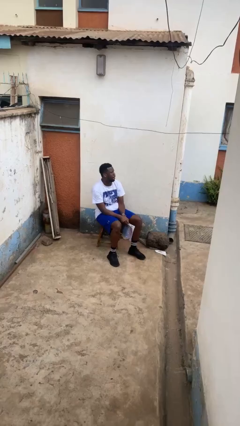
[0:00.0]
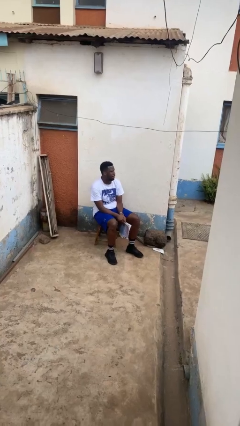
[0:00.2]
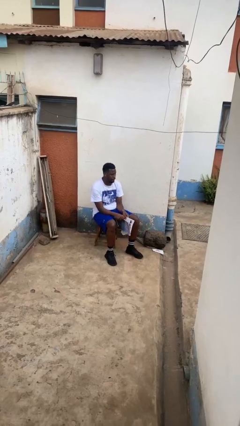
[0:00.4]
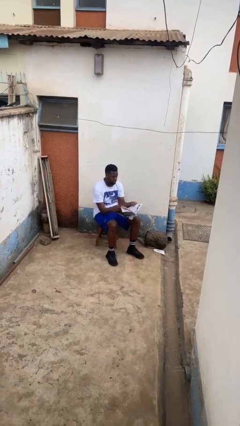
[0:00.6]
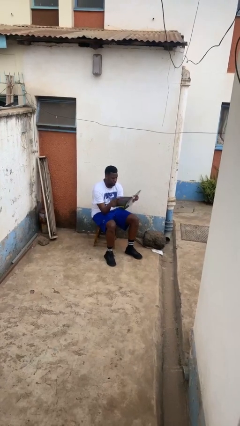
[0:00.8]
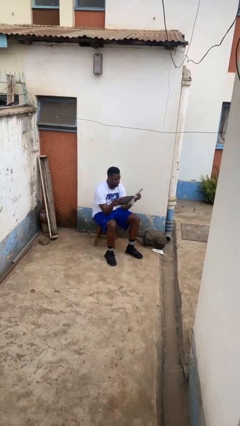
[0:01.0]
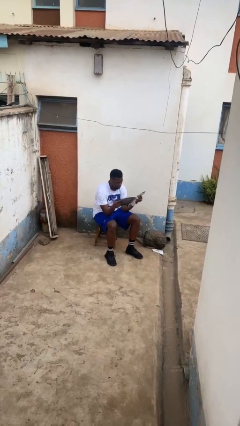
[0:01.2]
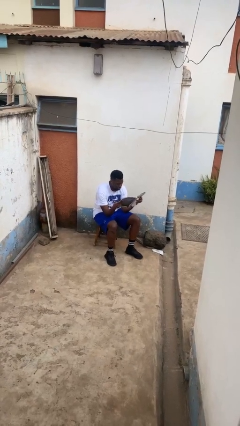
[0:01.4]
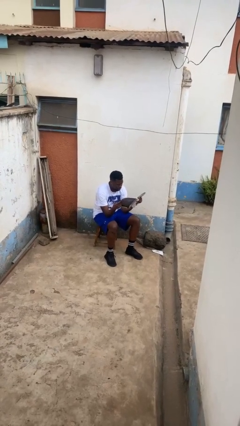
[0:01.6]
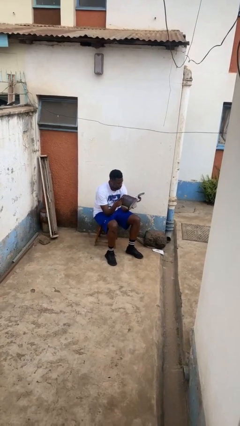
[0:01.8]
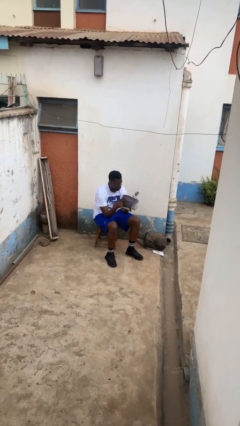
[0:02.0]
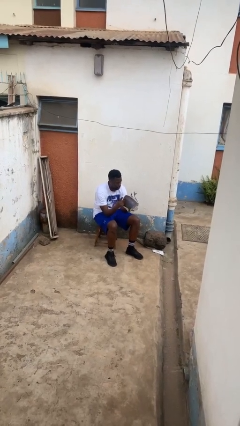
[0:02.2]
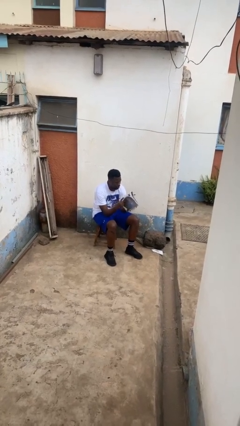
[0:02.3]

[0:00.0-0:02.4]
person reads magazine

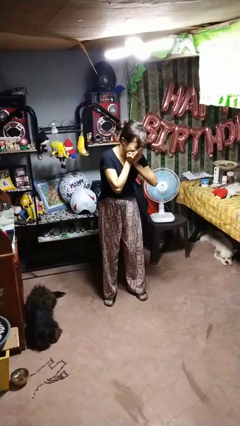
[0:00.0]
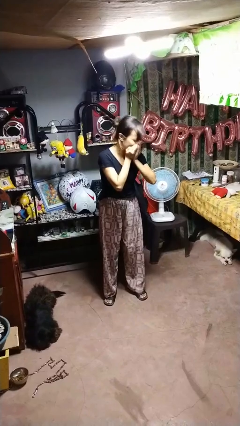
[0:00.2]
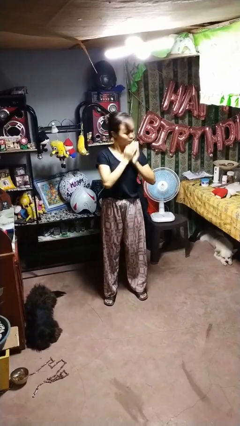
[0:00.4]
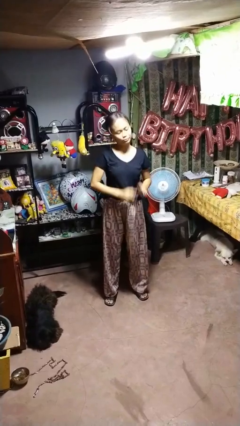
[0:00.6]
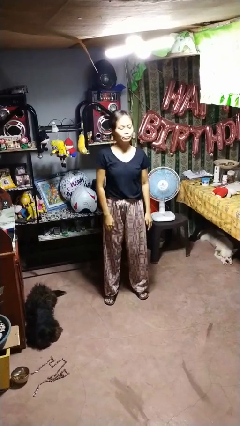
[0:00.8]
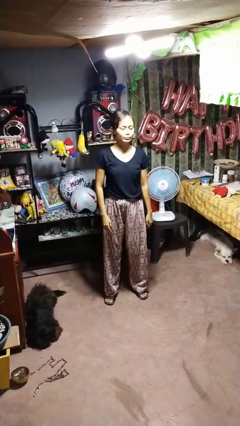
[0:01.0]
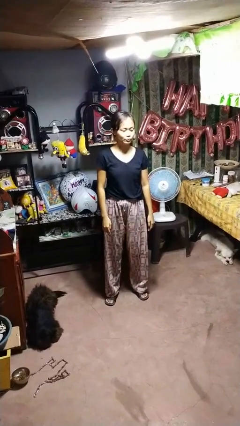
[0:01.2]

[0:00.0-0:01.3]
person sneezes into hand

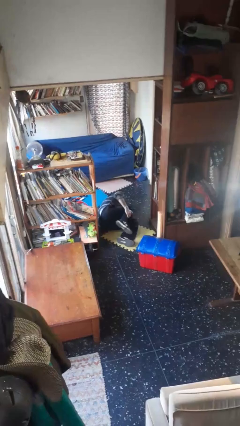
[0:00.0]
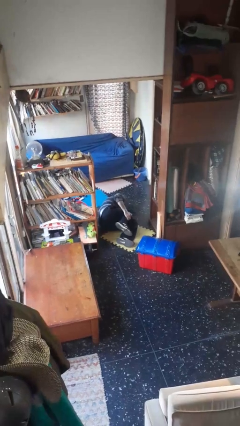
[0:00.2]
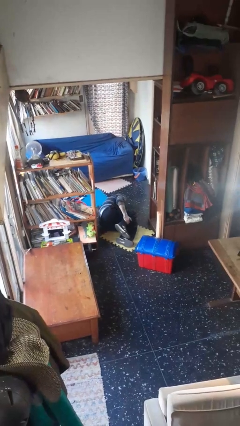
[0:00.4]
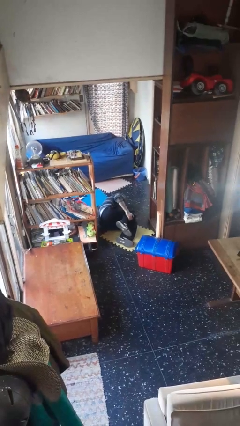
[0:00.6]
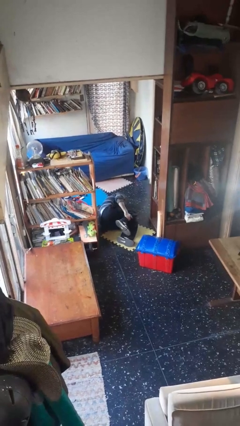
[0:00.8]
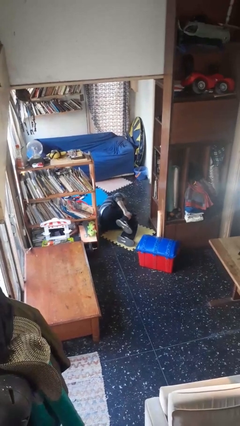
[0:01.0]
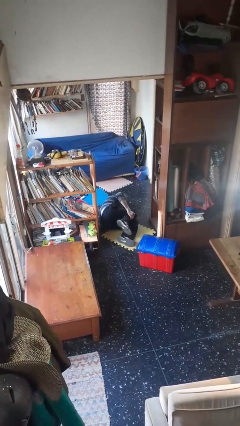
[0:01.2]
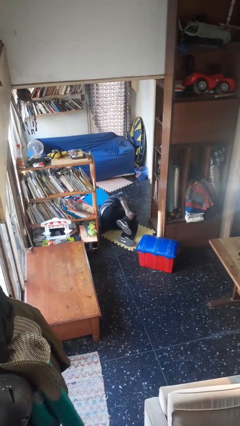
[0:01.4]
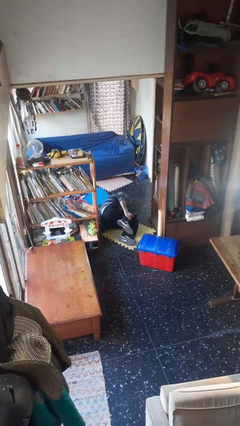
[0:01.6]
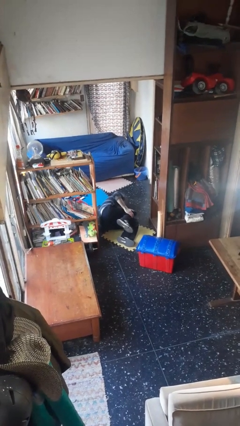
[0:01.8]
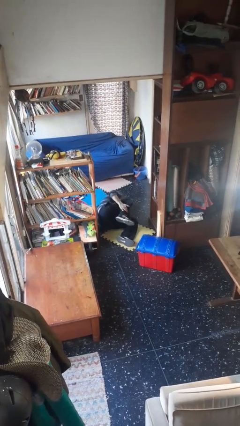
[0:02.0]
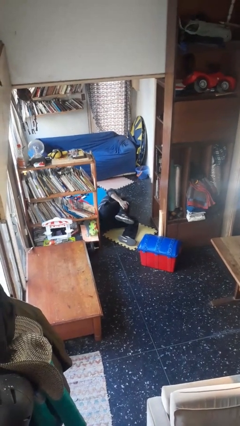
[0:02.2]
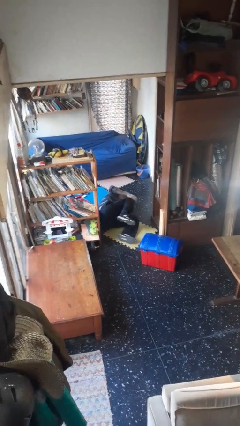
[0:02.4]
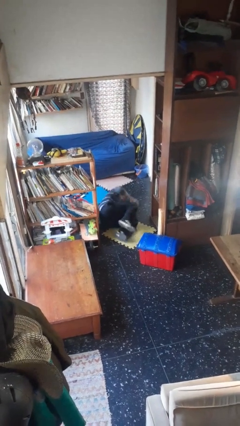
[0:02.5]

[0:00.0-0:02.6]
person lies down on floor

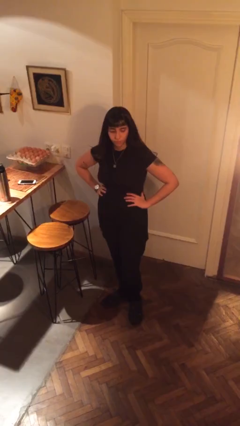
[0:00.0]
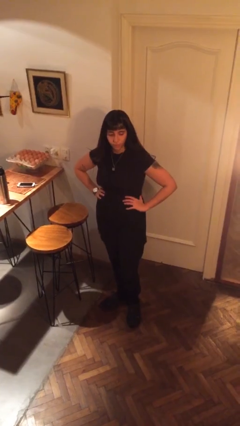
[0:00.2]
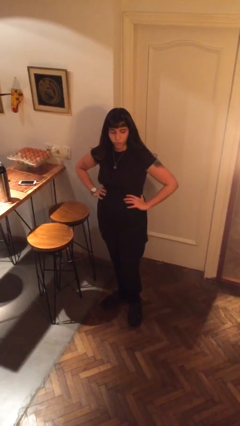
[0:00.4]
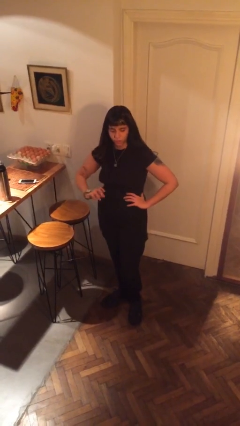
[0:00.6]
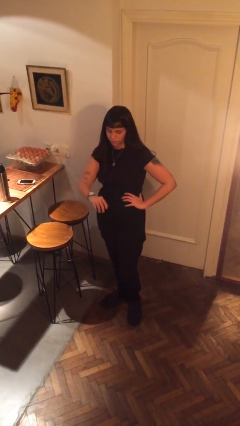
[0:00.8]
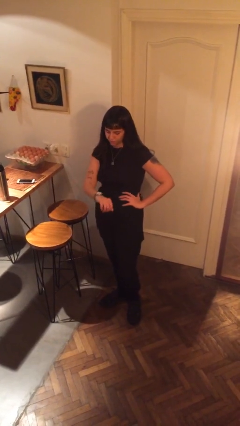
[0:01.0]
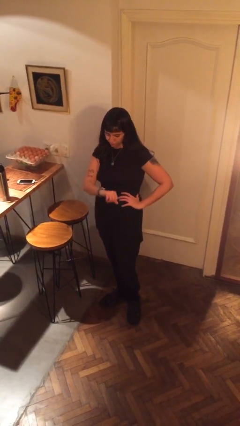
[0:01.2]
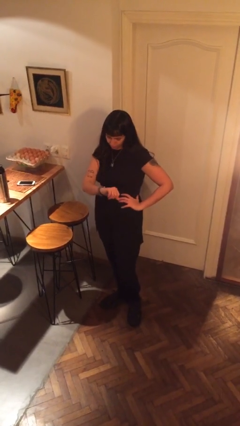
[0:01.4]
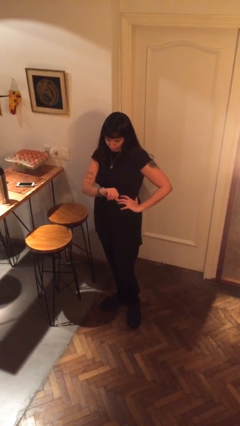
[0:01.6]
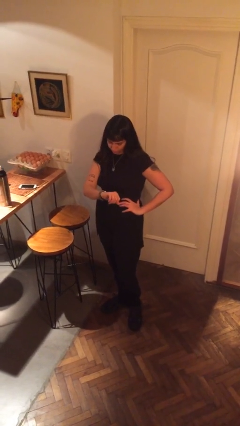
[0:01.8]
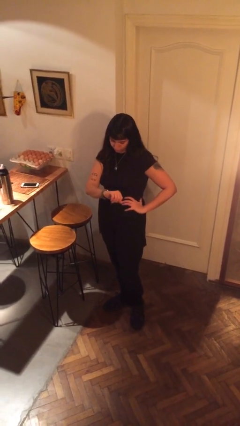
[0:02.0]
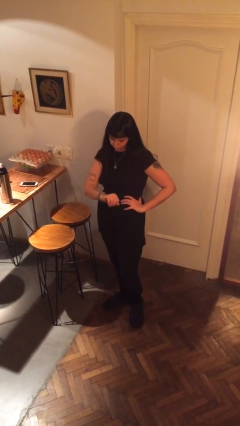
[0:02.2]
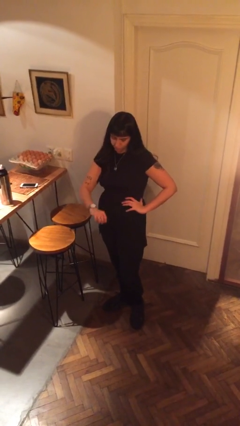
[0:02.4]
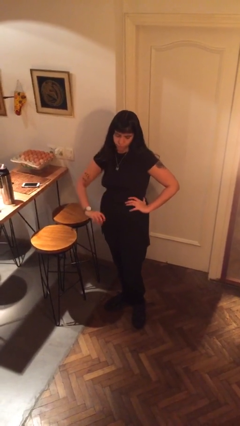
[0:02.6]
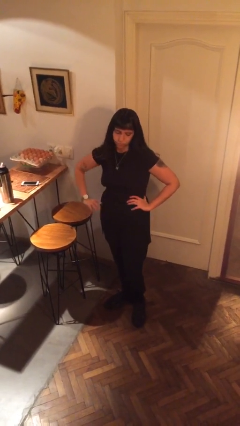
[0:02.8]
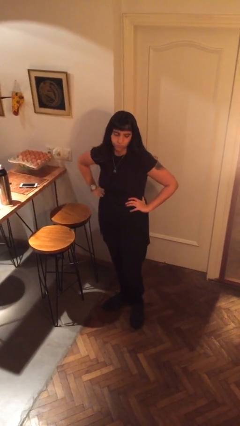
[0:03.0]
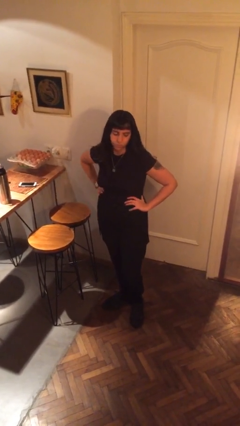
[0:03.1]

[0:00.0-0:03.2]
person looks at wristwatch

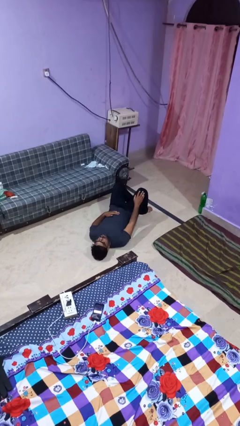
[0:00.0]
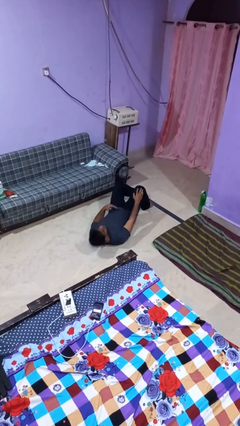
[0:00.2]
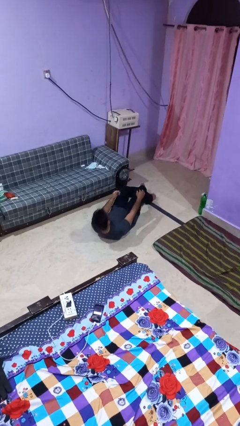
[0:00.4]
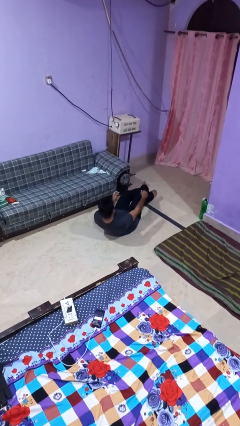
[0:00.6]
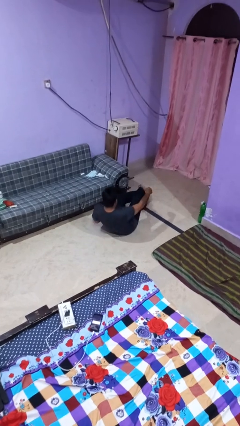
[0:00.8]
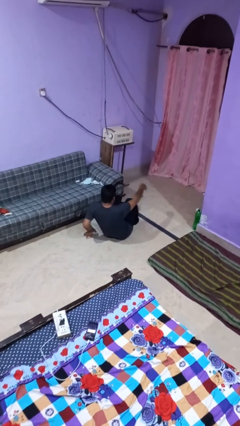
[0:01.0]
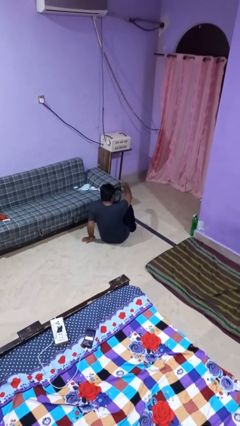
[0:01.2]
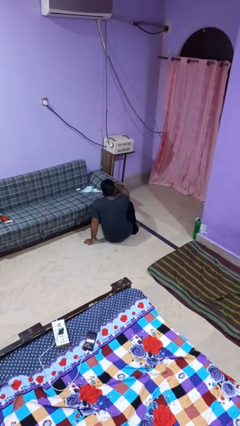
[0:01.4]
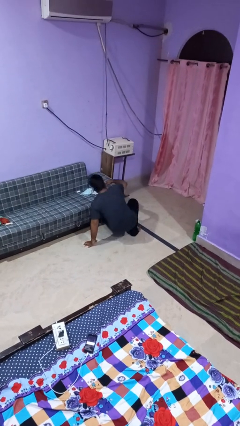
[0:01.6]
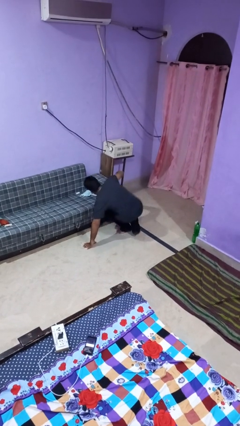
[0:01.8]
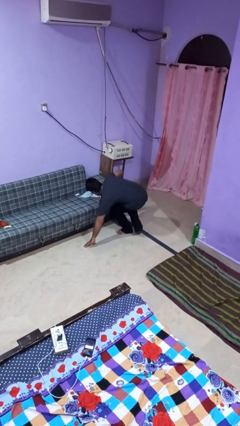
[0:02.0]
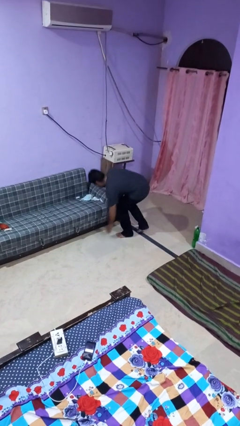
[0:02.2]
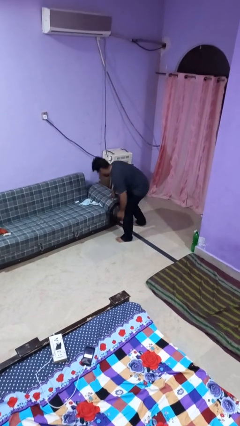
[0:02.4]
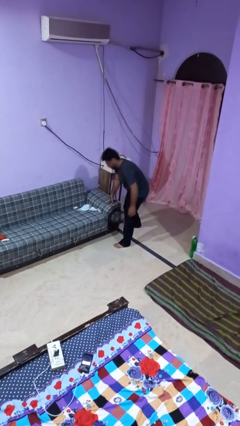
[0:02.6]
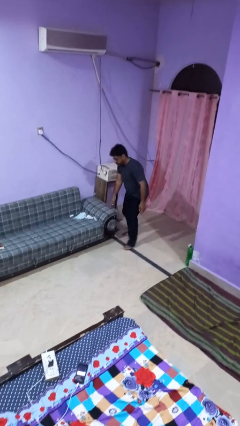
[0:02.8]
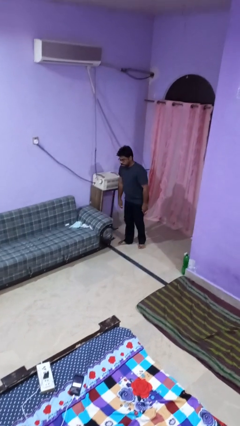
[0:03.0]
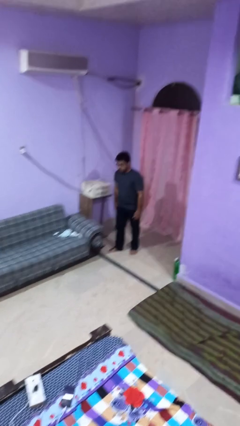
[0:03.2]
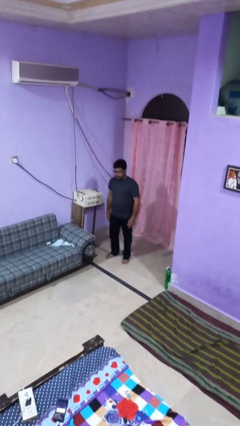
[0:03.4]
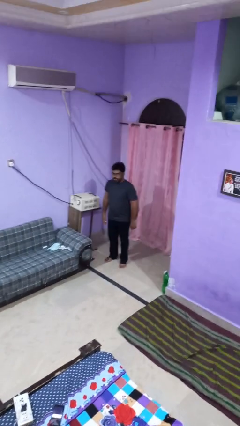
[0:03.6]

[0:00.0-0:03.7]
person stands up from floor

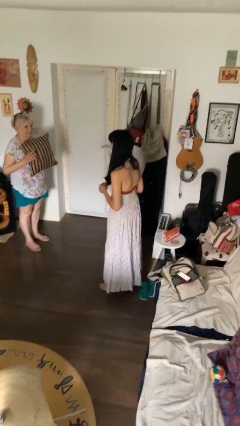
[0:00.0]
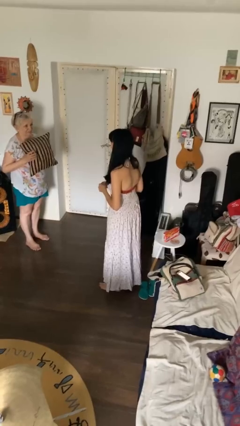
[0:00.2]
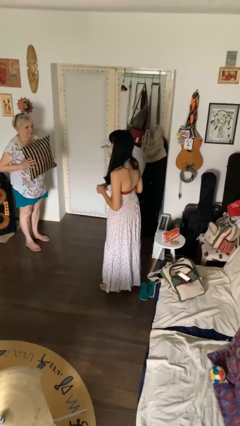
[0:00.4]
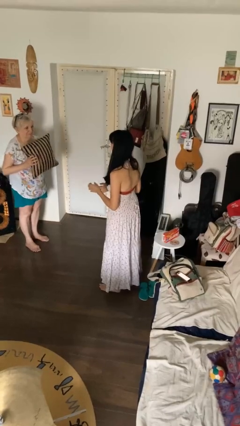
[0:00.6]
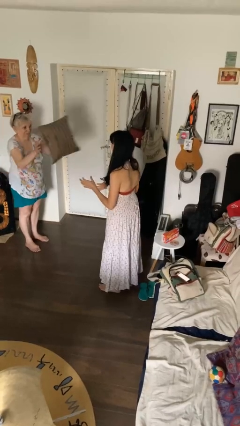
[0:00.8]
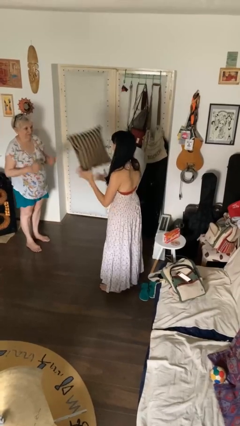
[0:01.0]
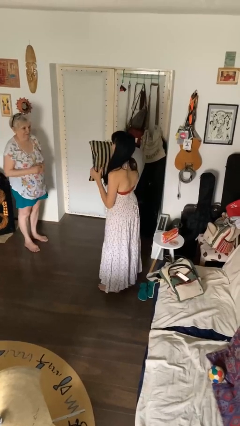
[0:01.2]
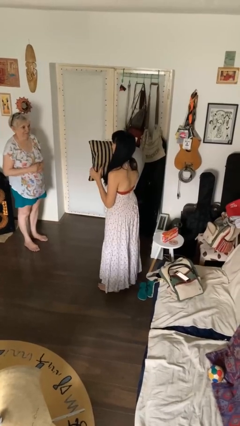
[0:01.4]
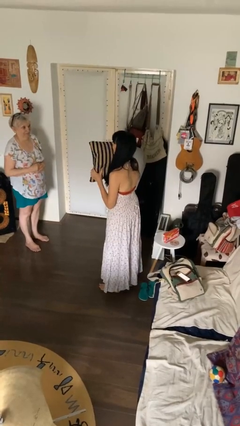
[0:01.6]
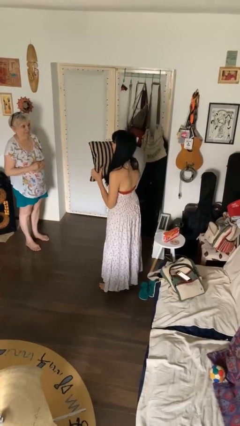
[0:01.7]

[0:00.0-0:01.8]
person catches object from person

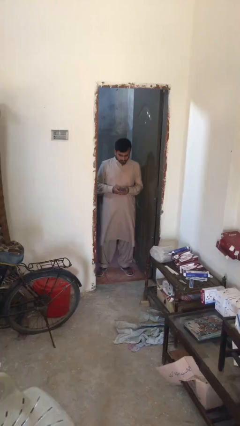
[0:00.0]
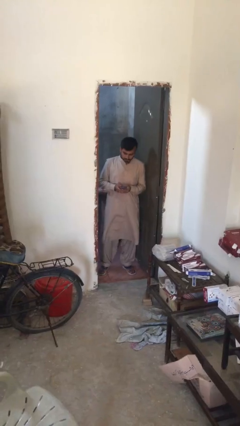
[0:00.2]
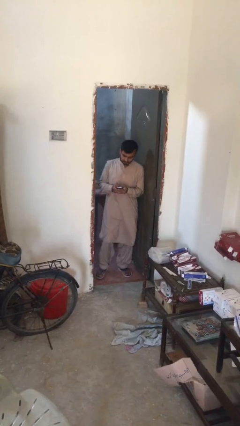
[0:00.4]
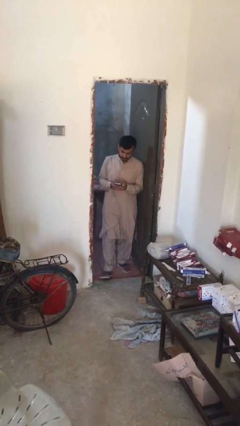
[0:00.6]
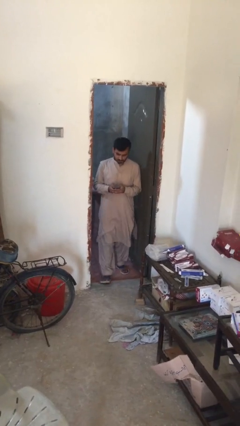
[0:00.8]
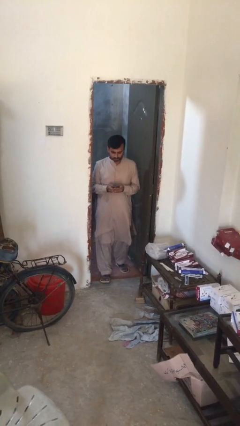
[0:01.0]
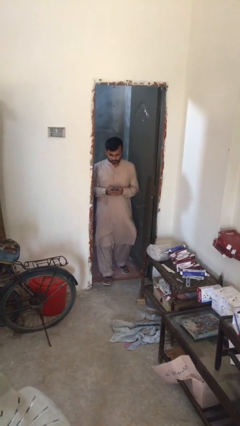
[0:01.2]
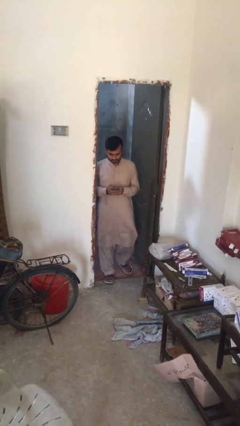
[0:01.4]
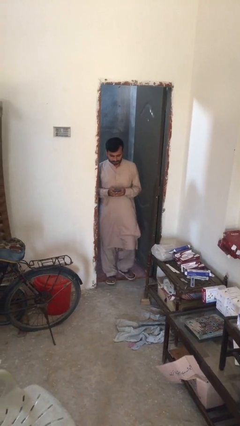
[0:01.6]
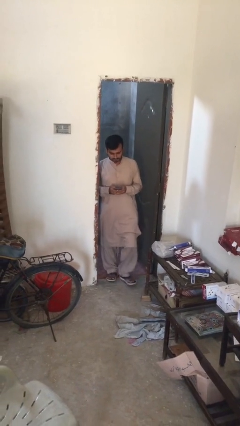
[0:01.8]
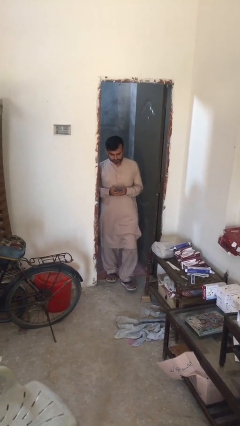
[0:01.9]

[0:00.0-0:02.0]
person texts on phone

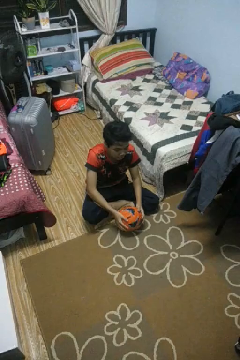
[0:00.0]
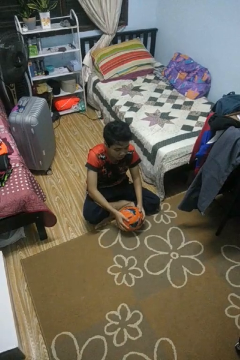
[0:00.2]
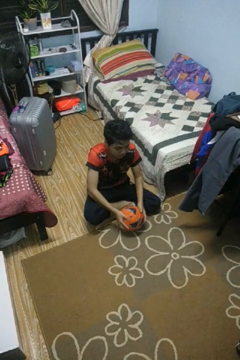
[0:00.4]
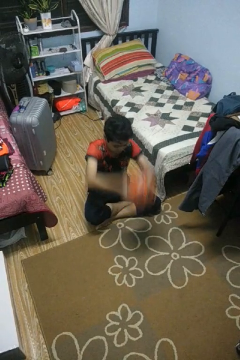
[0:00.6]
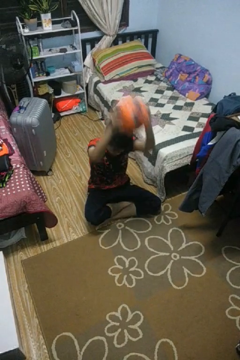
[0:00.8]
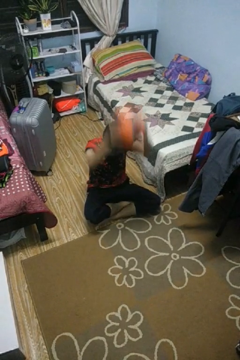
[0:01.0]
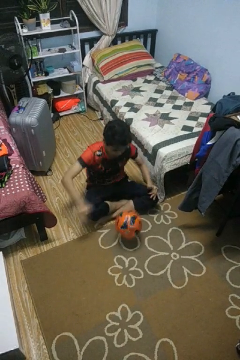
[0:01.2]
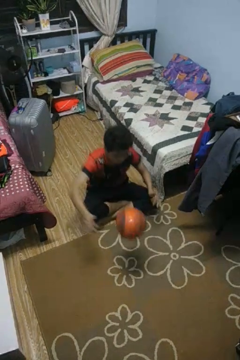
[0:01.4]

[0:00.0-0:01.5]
person bounces ball on floor
